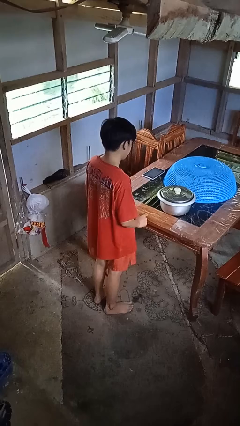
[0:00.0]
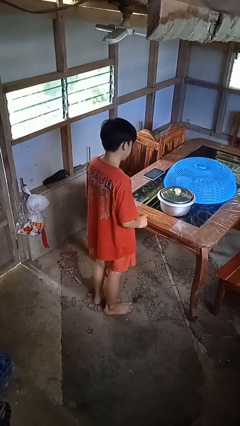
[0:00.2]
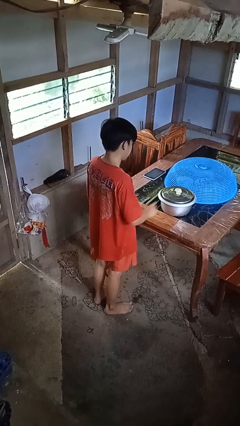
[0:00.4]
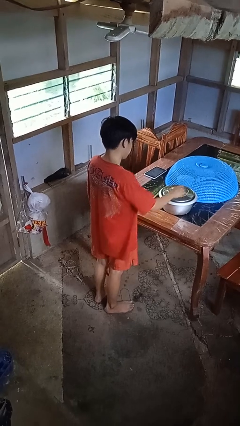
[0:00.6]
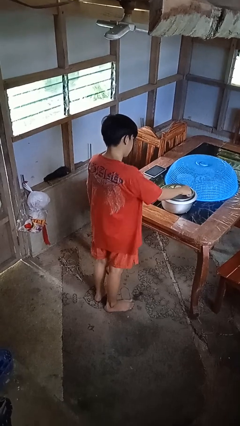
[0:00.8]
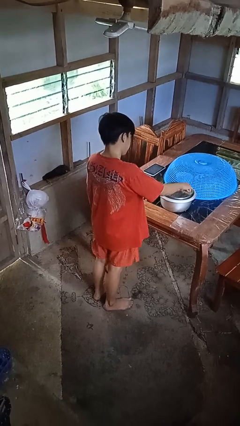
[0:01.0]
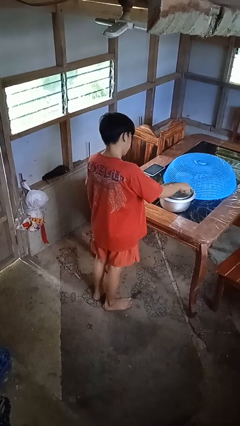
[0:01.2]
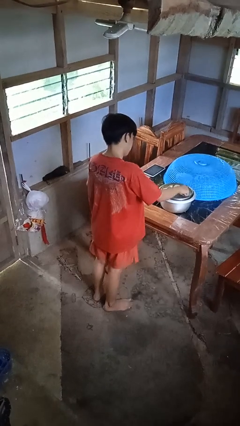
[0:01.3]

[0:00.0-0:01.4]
person taps object with finger

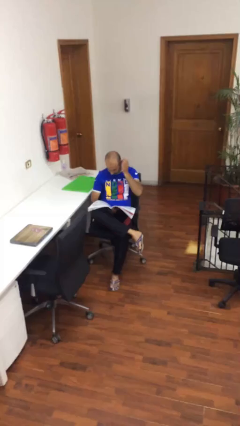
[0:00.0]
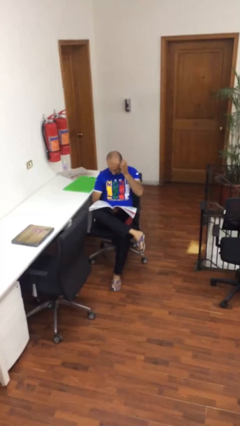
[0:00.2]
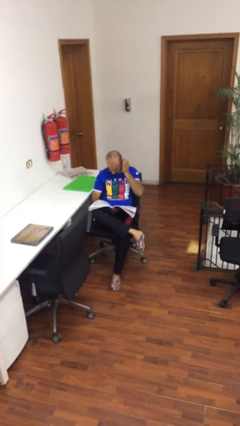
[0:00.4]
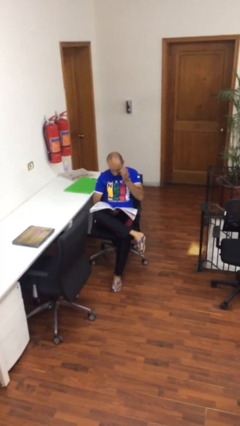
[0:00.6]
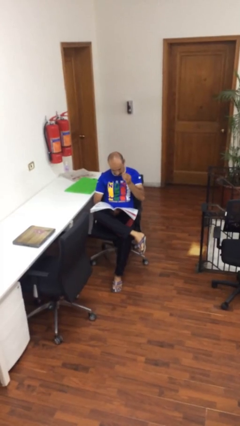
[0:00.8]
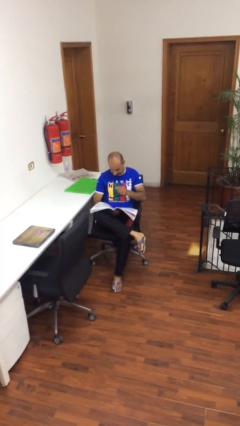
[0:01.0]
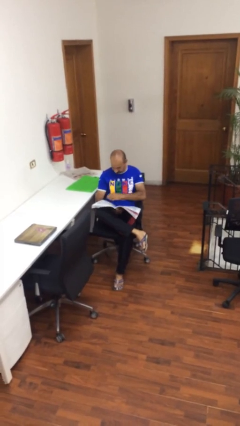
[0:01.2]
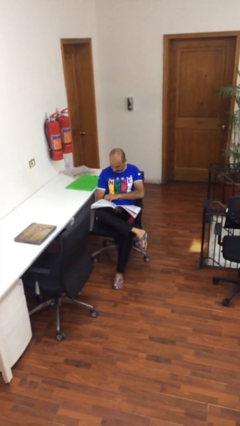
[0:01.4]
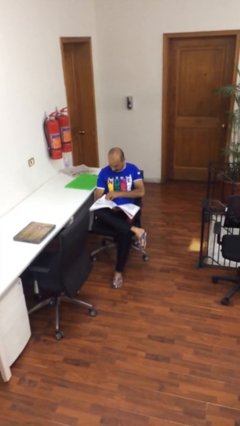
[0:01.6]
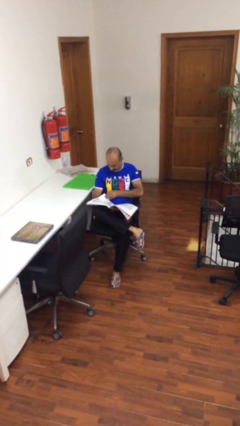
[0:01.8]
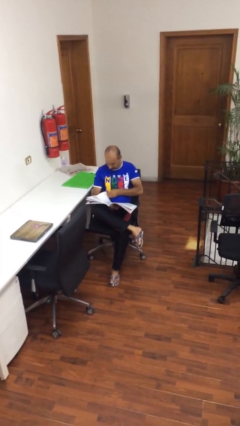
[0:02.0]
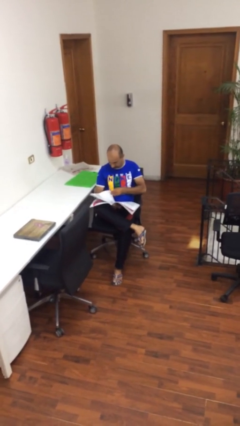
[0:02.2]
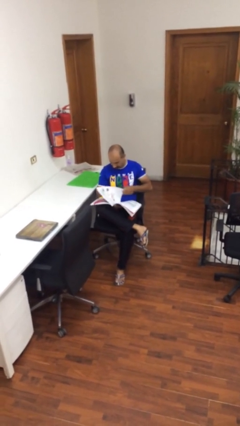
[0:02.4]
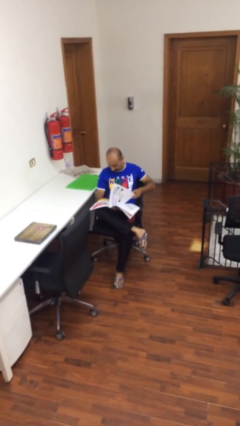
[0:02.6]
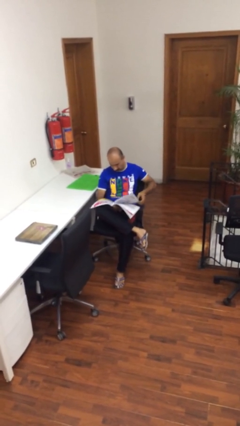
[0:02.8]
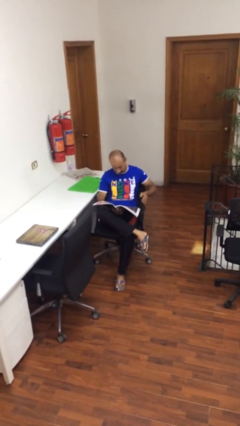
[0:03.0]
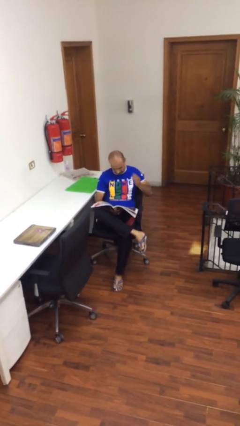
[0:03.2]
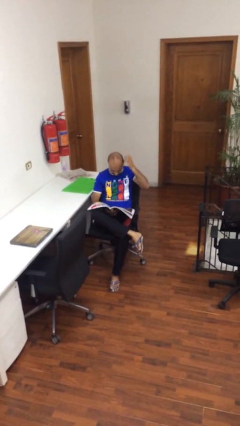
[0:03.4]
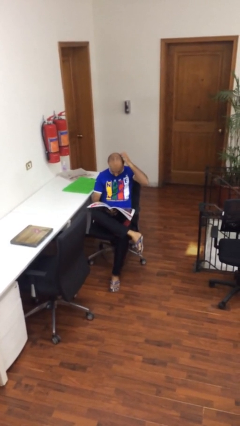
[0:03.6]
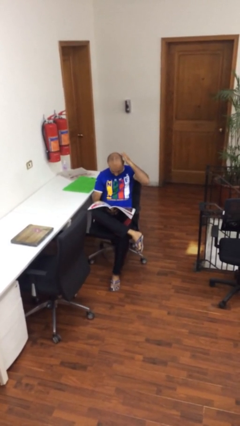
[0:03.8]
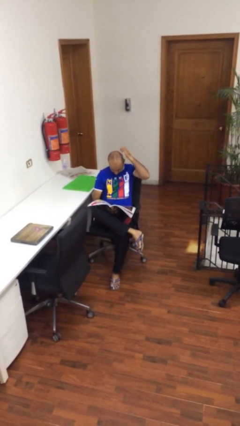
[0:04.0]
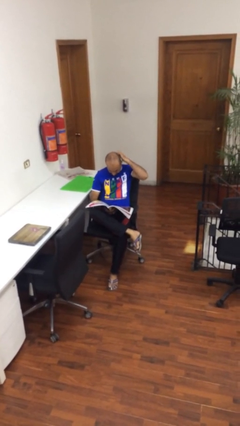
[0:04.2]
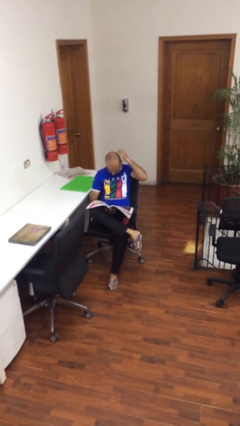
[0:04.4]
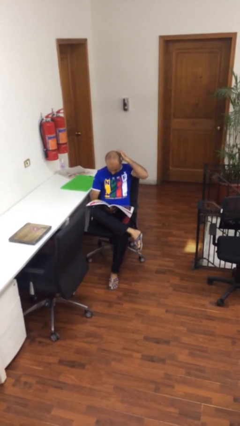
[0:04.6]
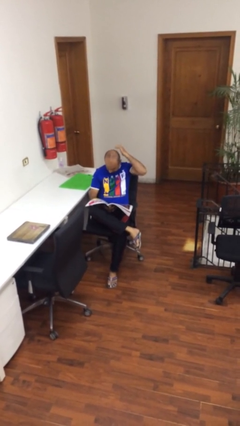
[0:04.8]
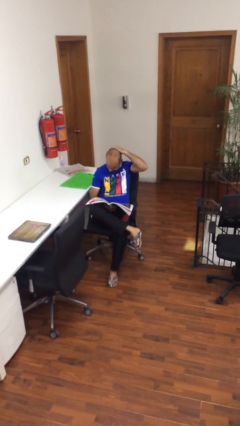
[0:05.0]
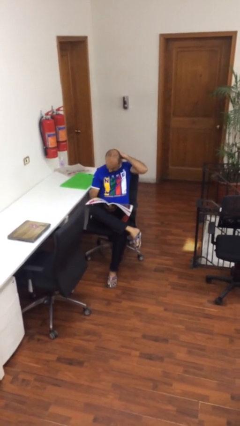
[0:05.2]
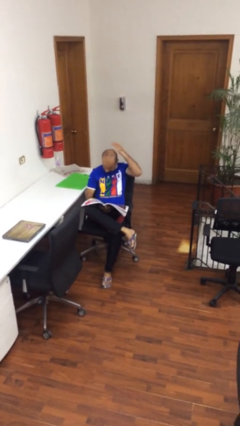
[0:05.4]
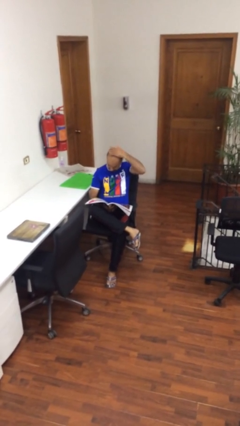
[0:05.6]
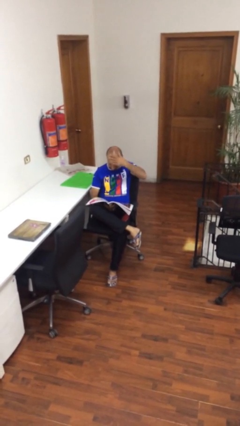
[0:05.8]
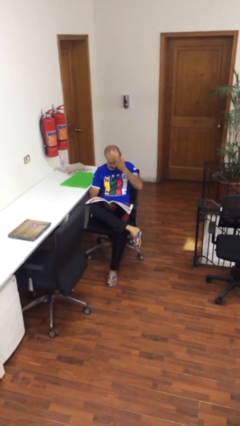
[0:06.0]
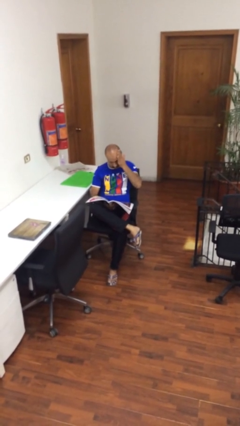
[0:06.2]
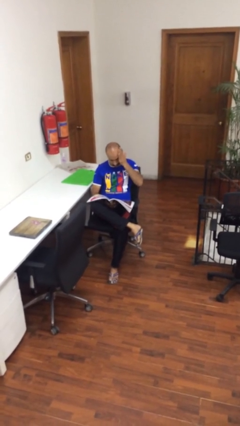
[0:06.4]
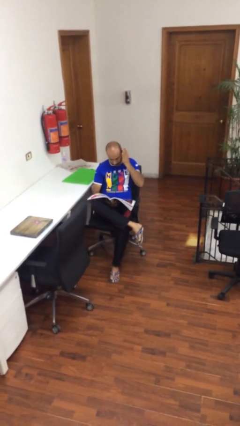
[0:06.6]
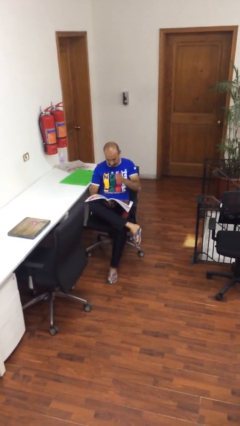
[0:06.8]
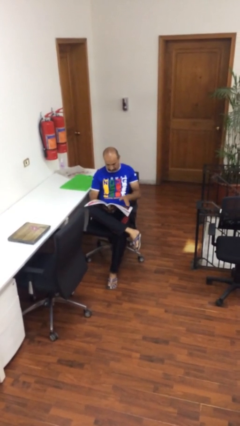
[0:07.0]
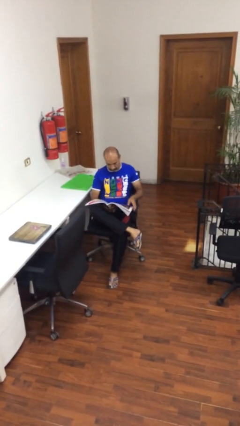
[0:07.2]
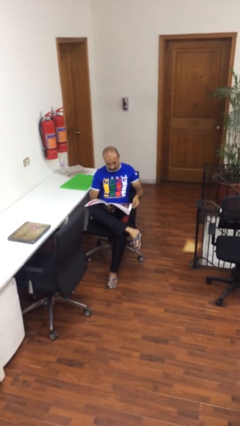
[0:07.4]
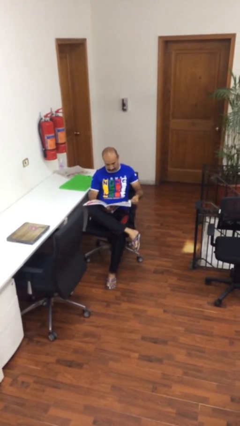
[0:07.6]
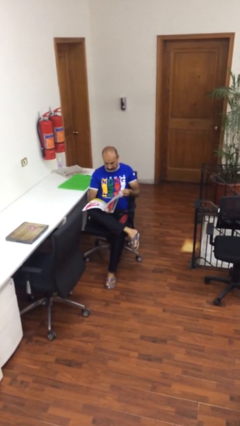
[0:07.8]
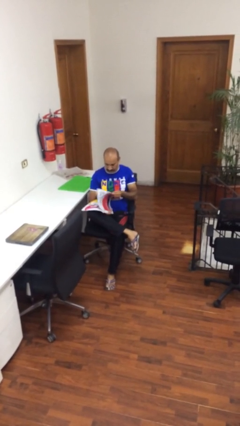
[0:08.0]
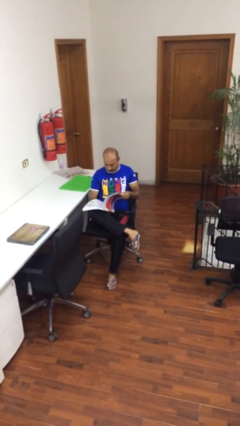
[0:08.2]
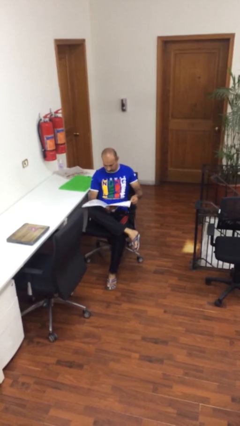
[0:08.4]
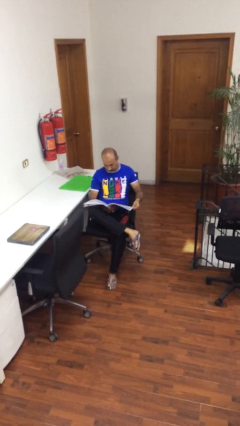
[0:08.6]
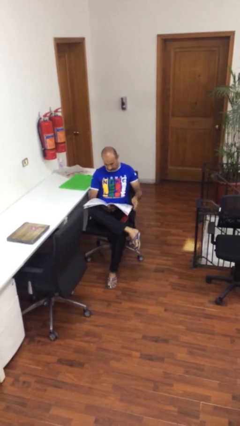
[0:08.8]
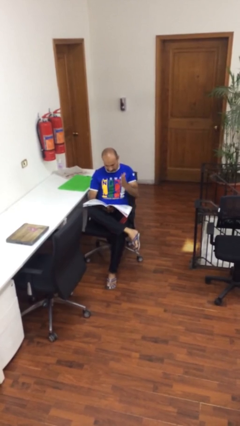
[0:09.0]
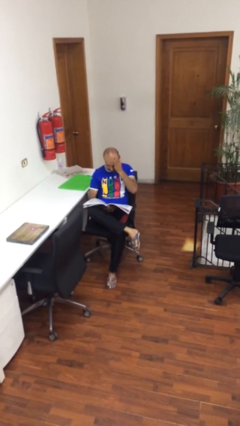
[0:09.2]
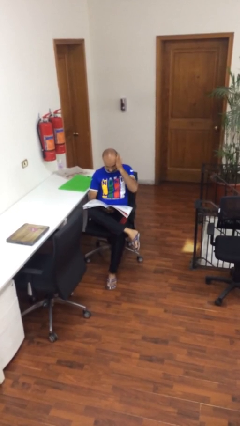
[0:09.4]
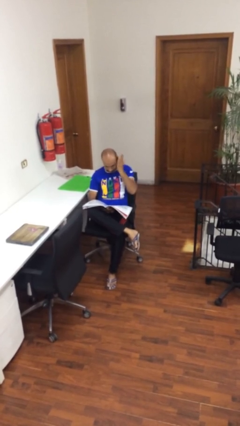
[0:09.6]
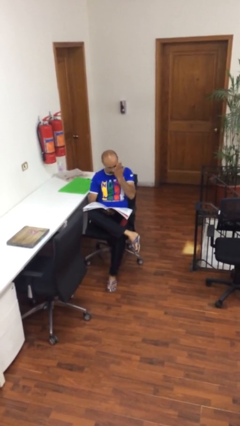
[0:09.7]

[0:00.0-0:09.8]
person reads document

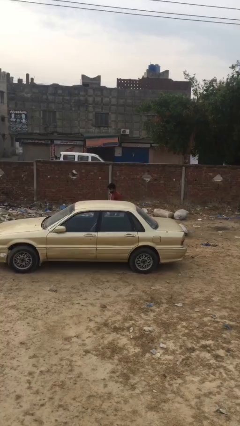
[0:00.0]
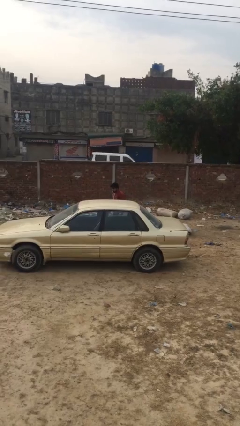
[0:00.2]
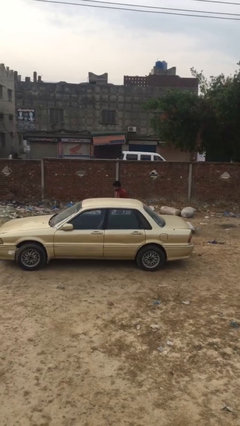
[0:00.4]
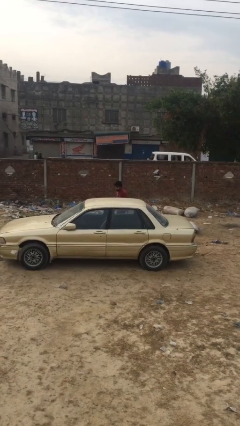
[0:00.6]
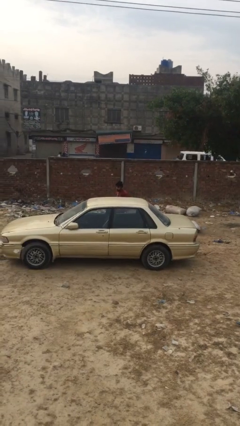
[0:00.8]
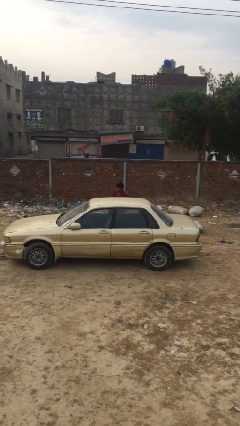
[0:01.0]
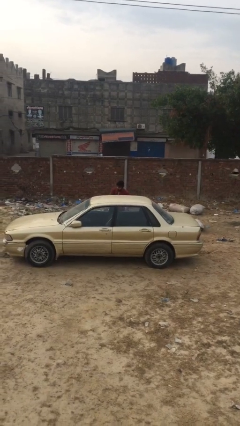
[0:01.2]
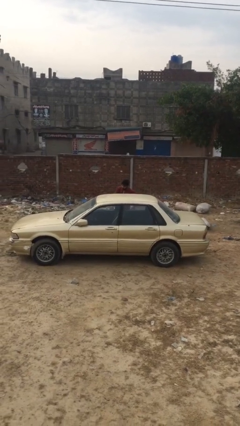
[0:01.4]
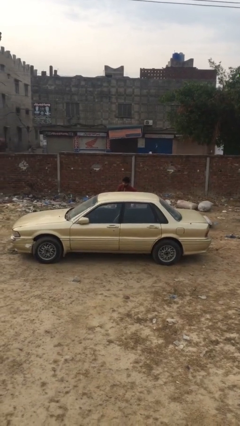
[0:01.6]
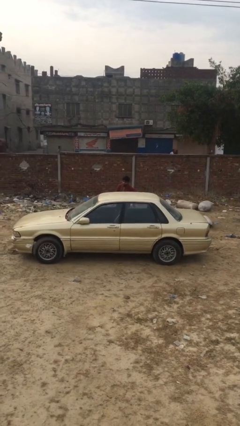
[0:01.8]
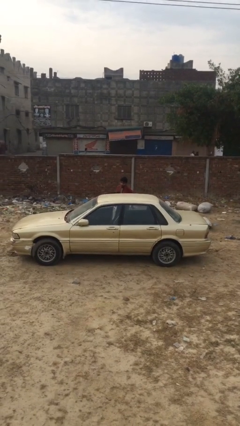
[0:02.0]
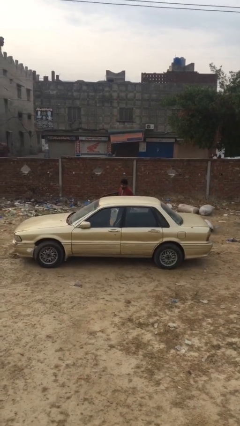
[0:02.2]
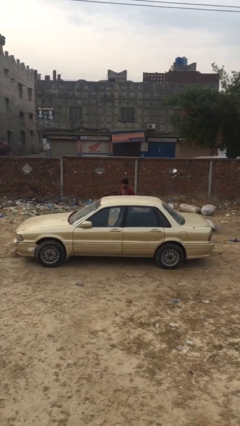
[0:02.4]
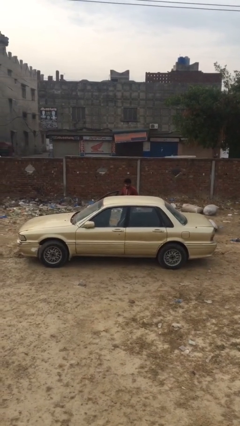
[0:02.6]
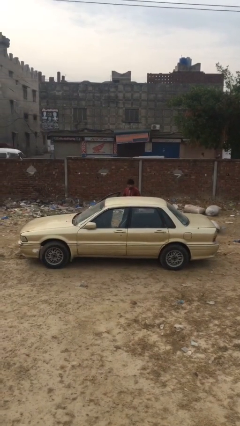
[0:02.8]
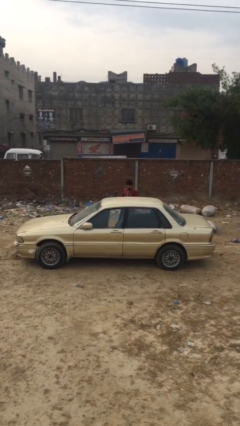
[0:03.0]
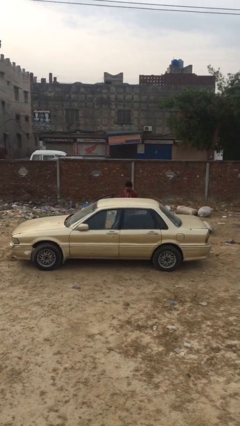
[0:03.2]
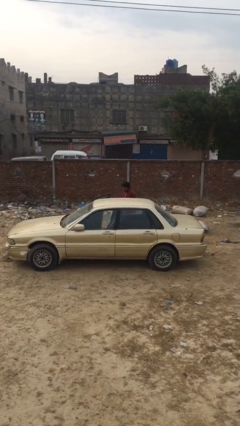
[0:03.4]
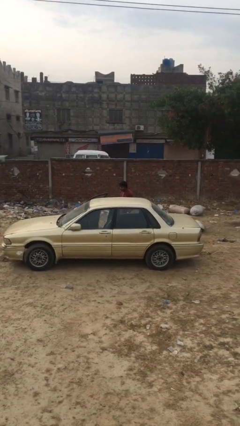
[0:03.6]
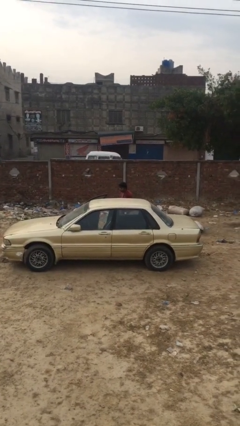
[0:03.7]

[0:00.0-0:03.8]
person opens car door

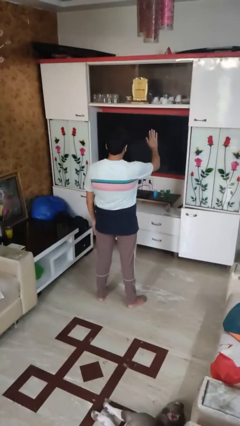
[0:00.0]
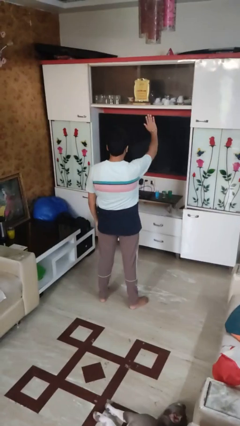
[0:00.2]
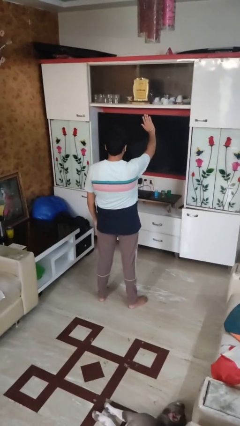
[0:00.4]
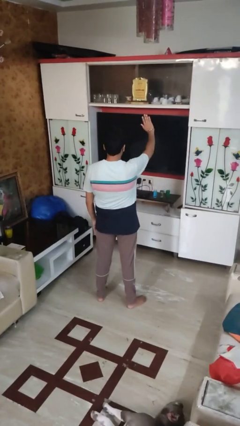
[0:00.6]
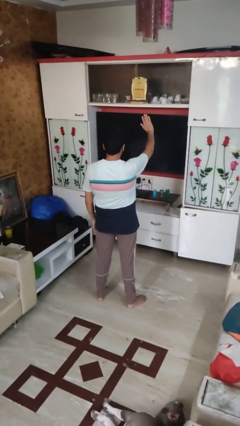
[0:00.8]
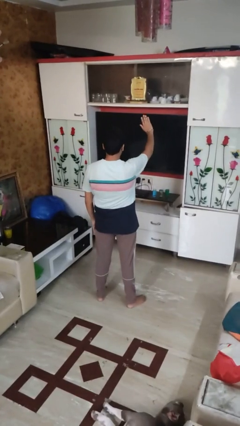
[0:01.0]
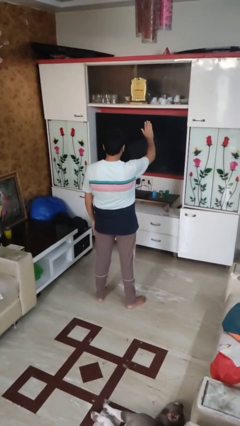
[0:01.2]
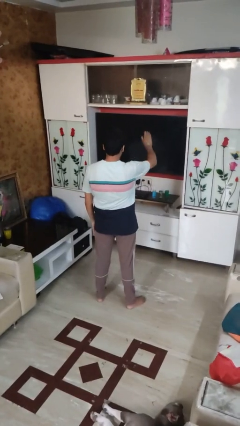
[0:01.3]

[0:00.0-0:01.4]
person gestures stop

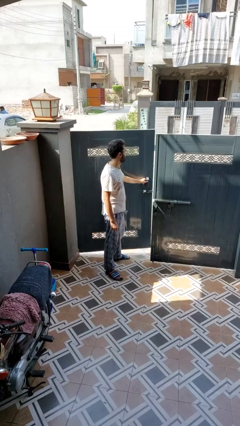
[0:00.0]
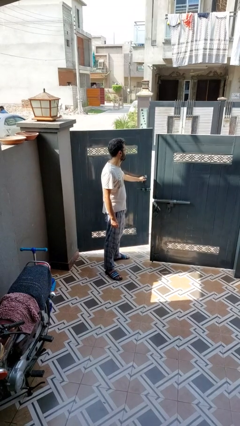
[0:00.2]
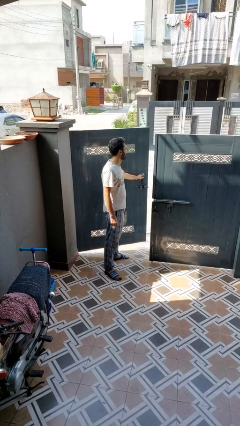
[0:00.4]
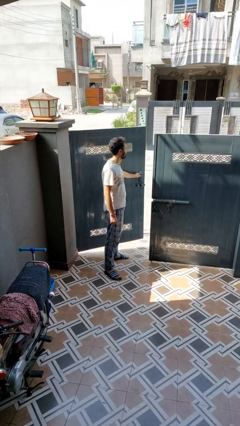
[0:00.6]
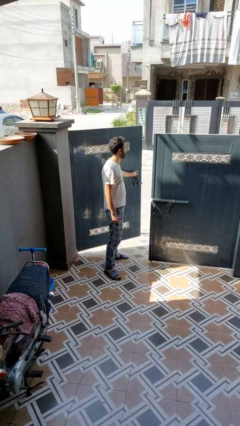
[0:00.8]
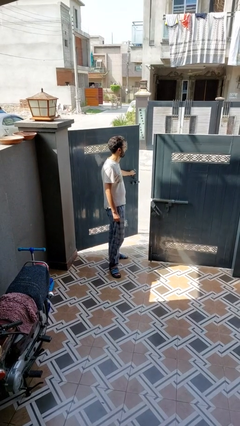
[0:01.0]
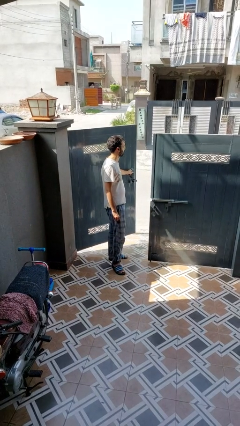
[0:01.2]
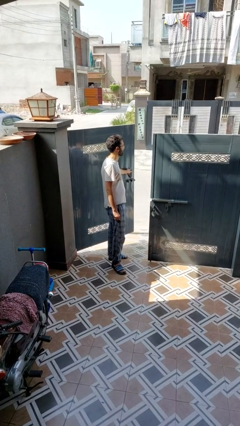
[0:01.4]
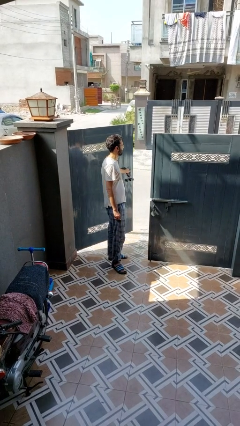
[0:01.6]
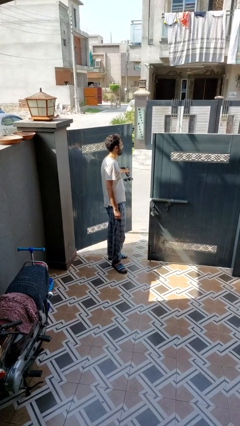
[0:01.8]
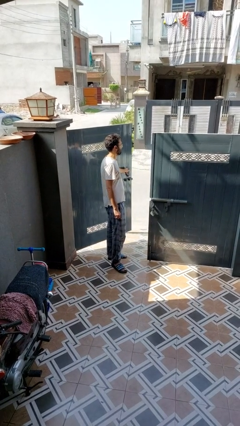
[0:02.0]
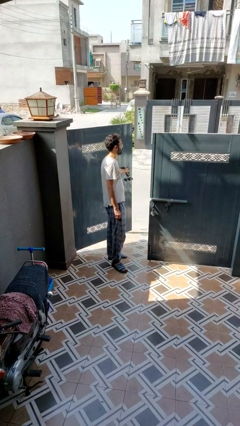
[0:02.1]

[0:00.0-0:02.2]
person opens gate
